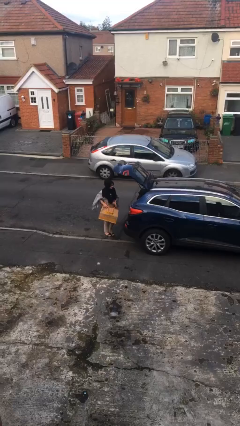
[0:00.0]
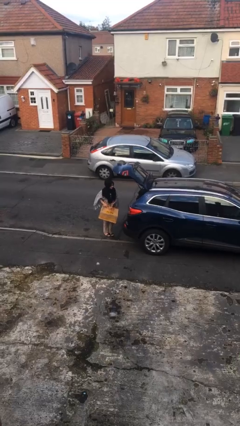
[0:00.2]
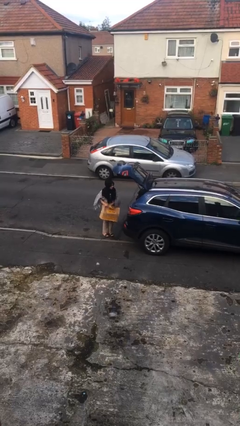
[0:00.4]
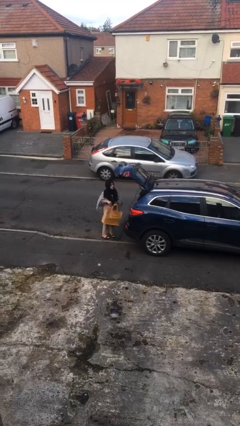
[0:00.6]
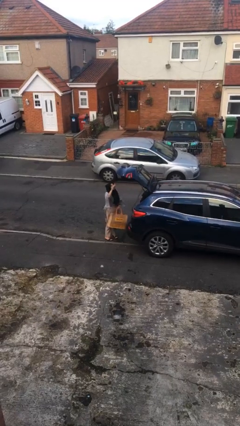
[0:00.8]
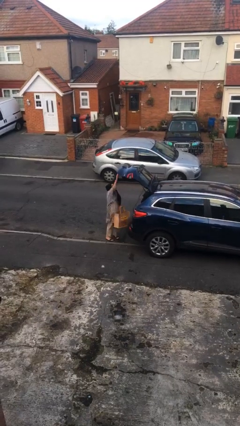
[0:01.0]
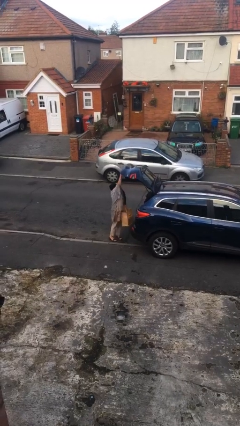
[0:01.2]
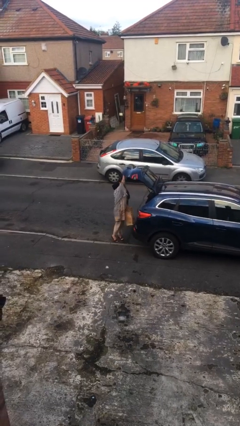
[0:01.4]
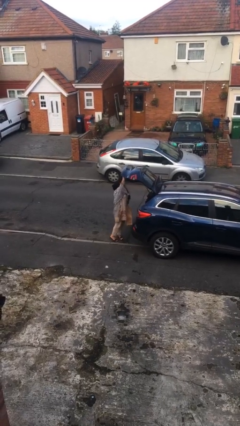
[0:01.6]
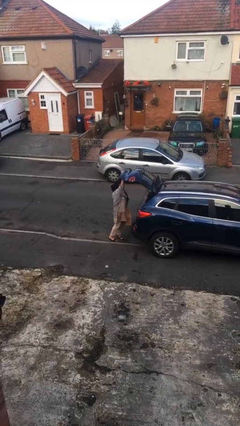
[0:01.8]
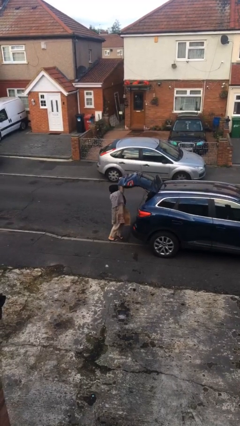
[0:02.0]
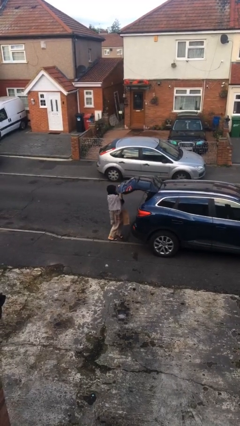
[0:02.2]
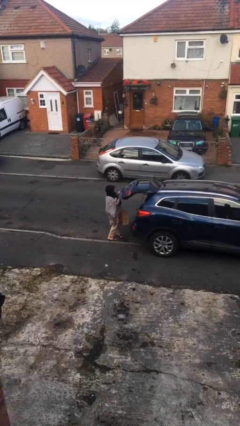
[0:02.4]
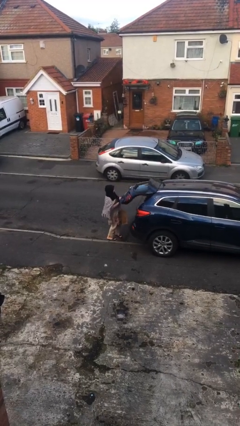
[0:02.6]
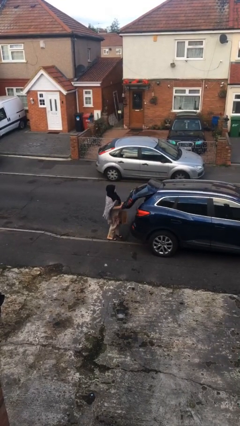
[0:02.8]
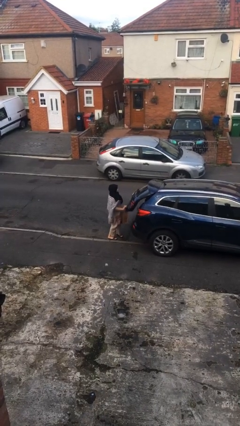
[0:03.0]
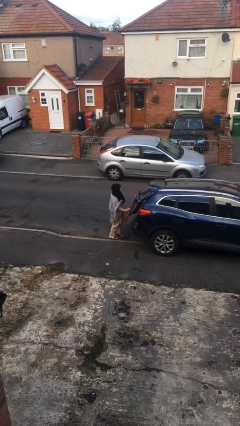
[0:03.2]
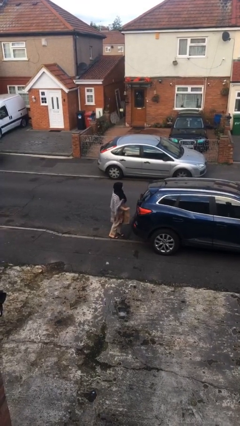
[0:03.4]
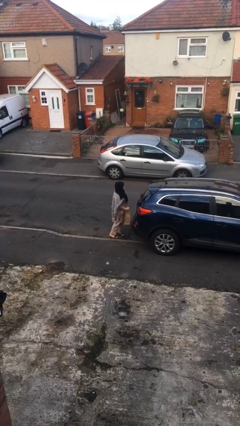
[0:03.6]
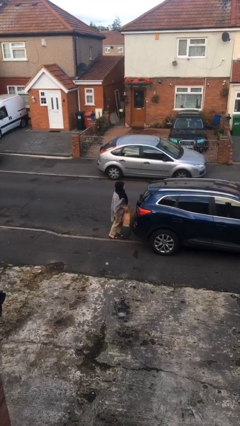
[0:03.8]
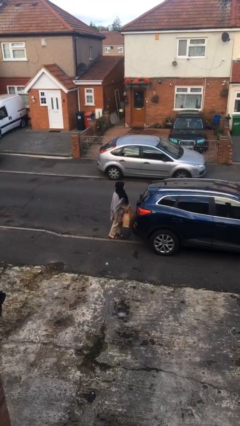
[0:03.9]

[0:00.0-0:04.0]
person closes car trunk

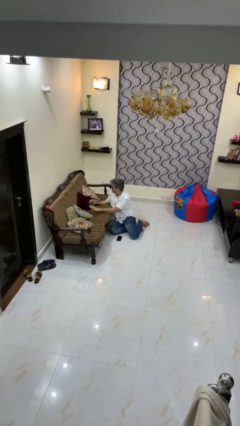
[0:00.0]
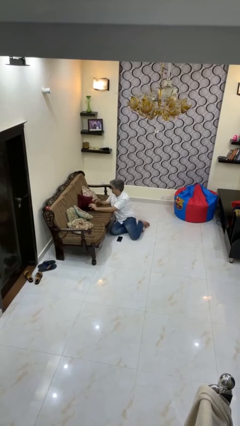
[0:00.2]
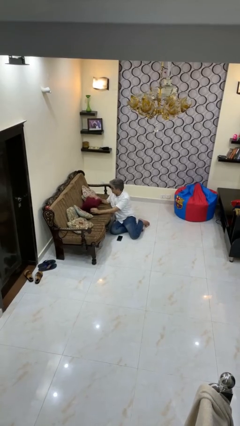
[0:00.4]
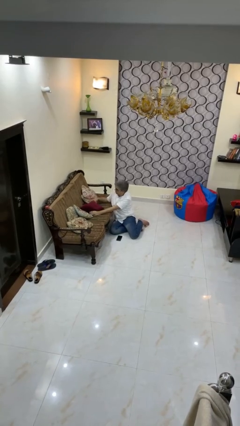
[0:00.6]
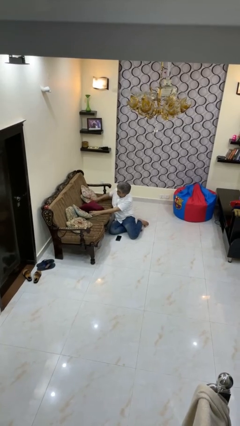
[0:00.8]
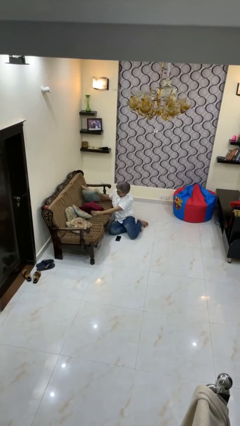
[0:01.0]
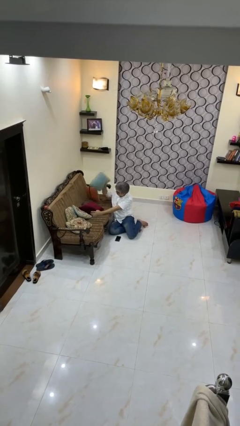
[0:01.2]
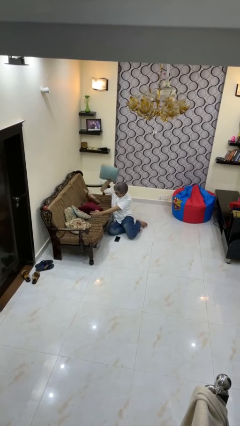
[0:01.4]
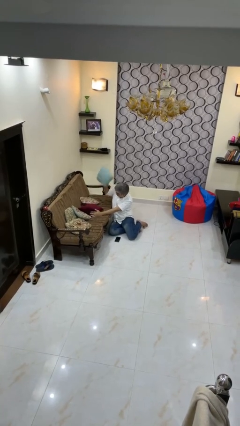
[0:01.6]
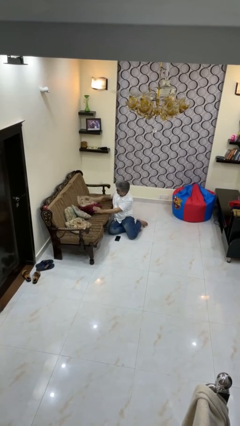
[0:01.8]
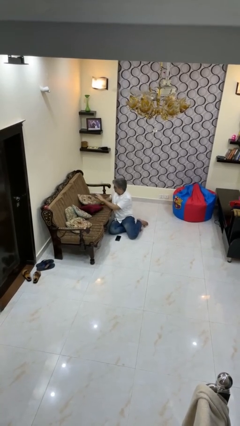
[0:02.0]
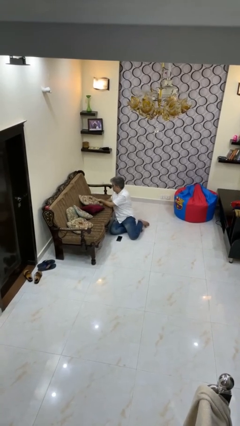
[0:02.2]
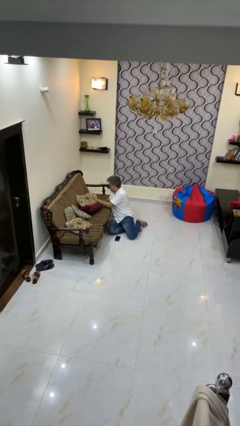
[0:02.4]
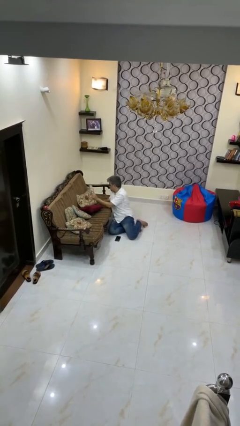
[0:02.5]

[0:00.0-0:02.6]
person searches in couch

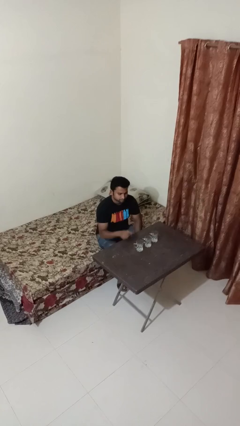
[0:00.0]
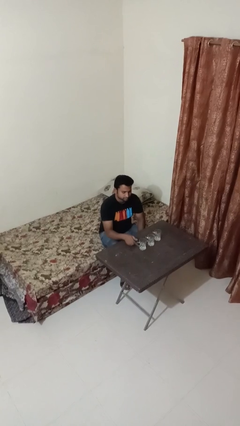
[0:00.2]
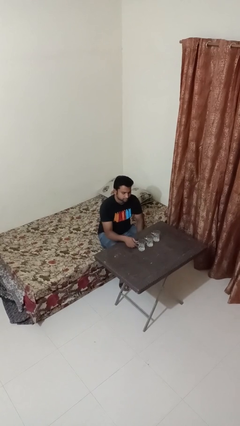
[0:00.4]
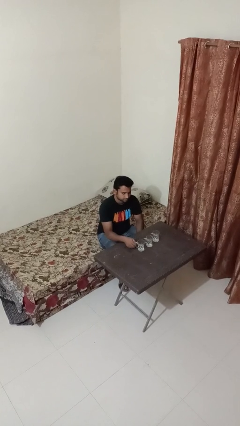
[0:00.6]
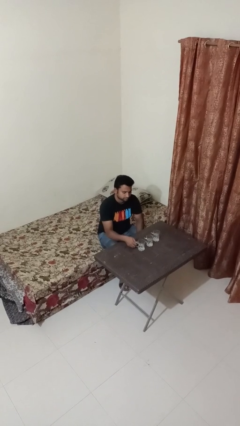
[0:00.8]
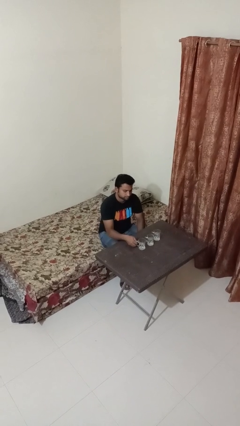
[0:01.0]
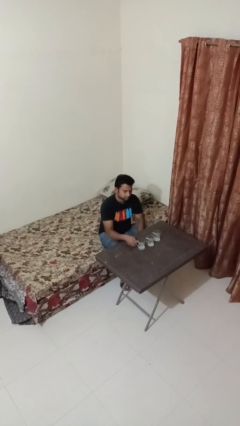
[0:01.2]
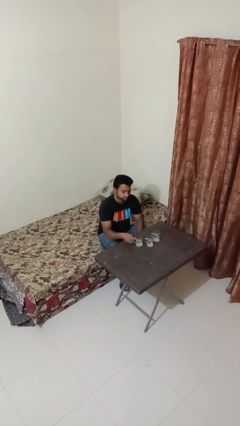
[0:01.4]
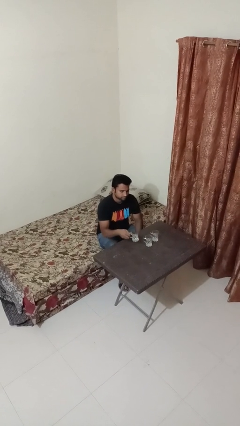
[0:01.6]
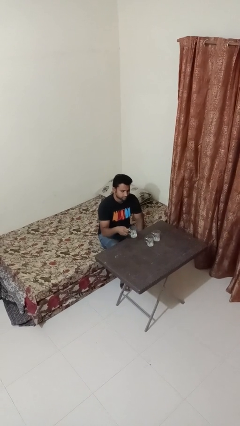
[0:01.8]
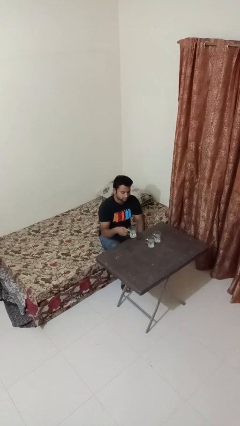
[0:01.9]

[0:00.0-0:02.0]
person picks up object from table

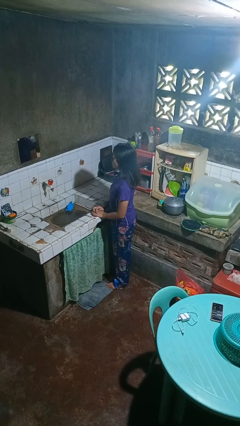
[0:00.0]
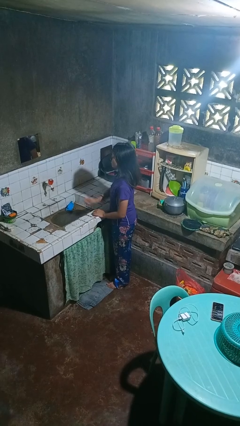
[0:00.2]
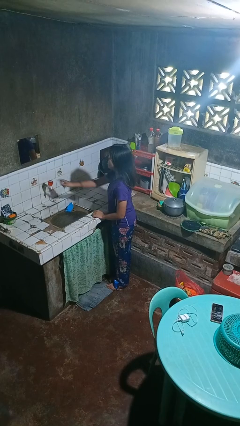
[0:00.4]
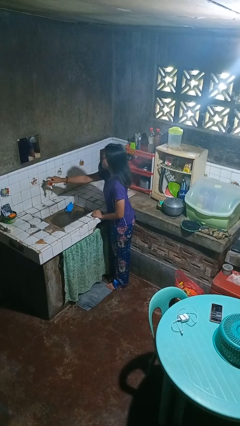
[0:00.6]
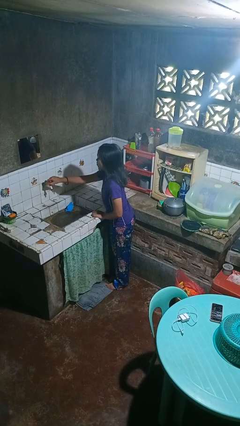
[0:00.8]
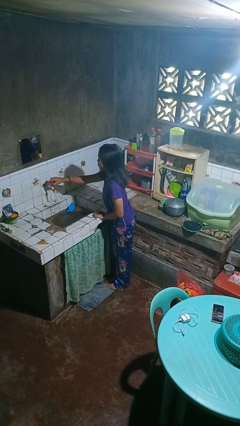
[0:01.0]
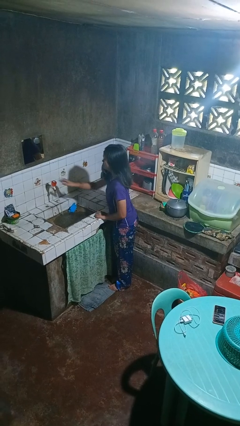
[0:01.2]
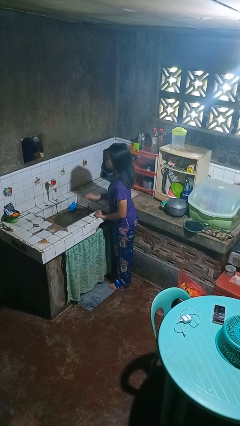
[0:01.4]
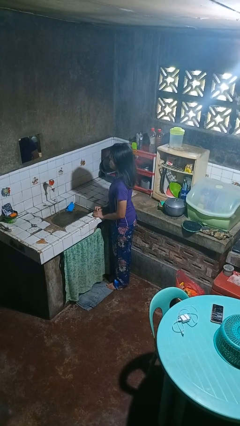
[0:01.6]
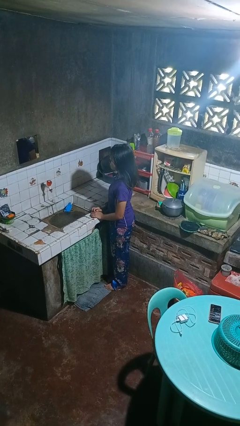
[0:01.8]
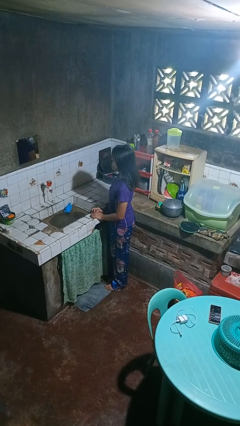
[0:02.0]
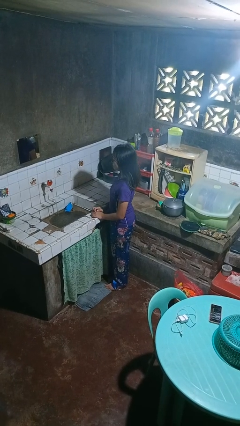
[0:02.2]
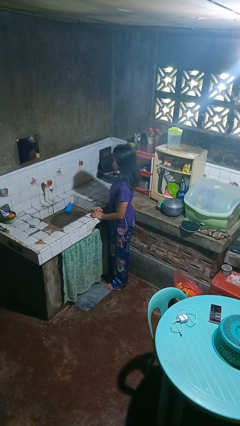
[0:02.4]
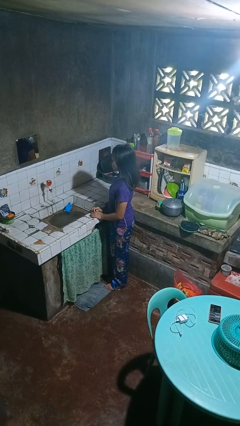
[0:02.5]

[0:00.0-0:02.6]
person turns on faucet

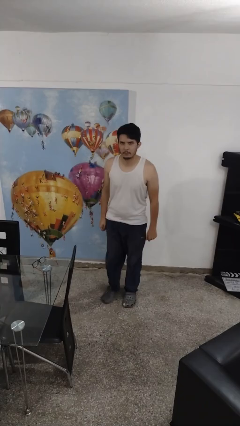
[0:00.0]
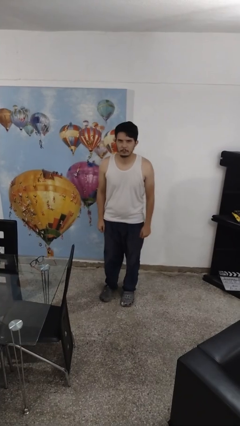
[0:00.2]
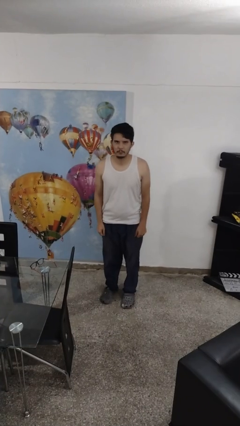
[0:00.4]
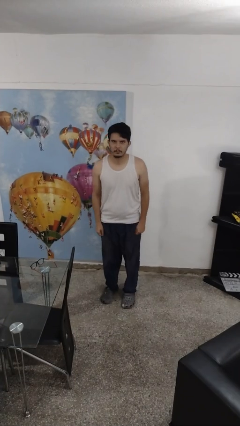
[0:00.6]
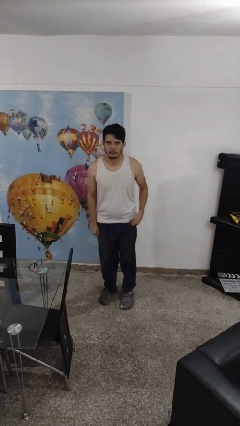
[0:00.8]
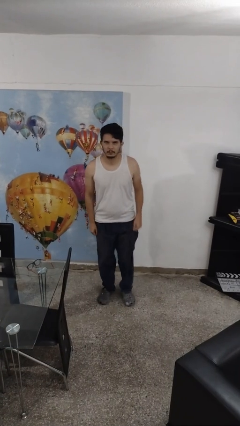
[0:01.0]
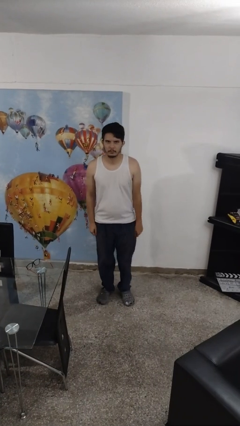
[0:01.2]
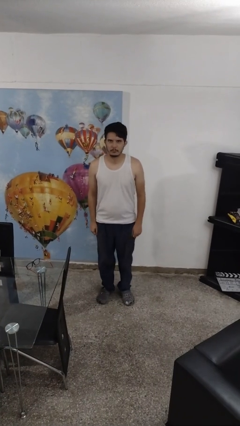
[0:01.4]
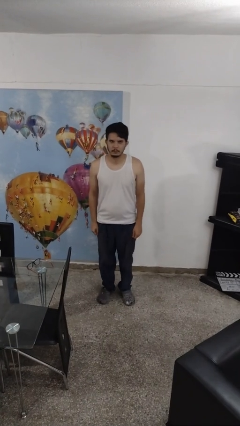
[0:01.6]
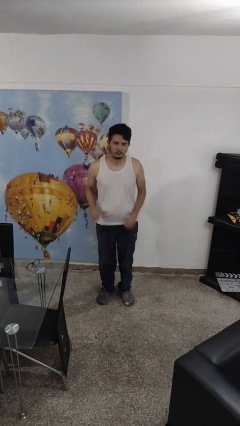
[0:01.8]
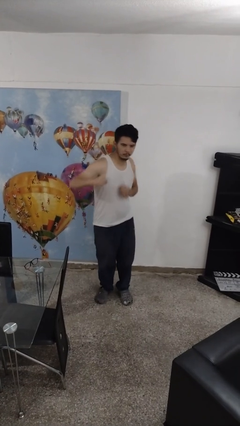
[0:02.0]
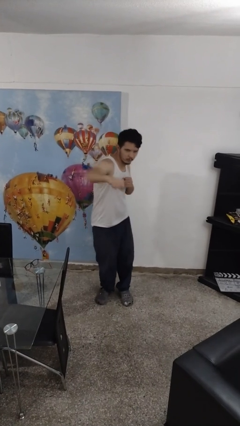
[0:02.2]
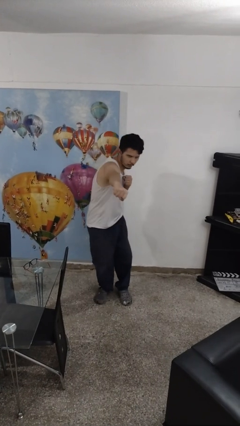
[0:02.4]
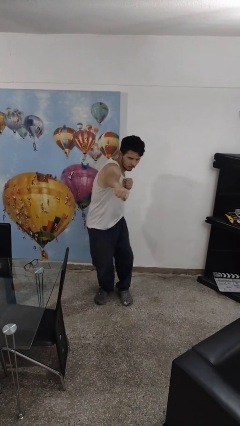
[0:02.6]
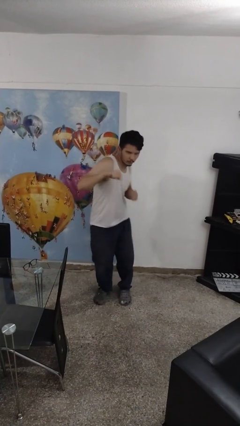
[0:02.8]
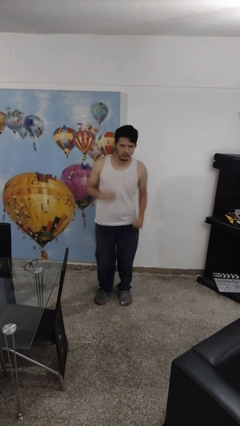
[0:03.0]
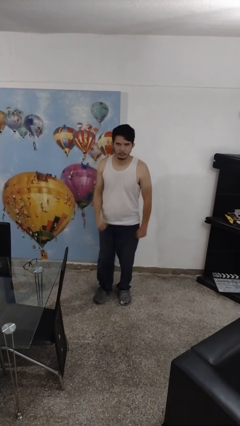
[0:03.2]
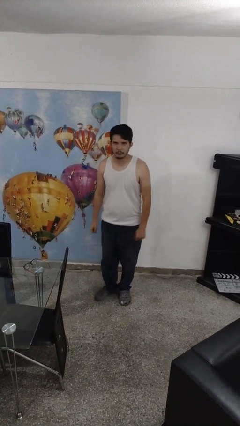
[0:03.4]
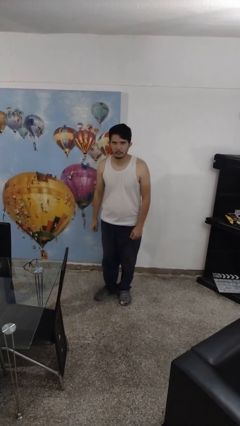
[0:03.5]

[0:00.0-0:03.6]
person karate chop

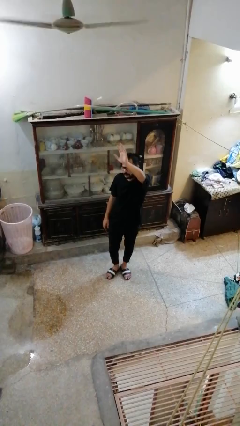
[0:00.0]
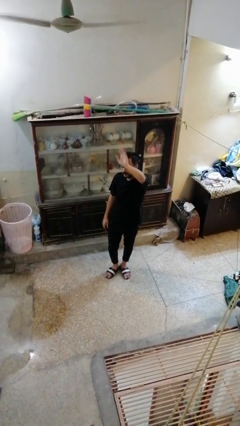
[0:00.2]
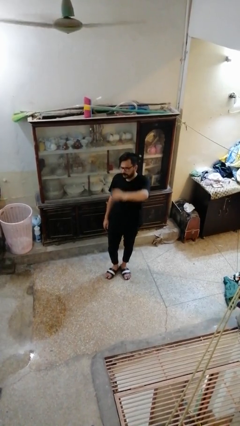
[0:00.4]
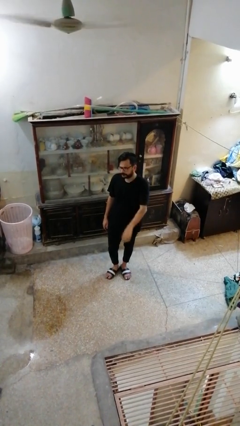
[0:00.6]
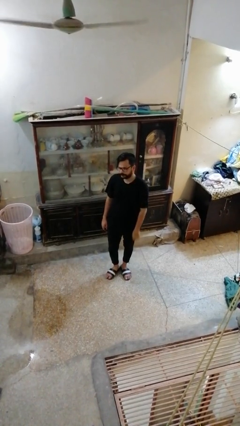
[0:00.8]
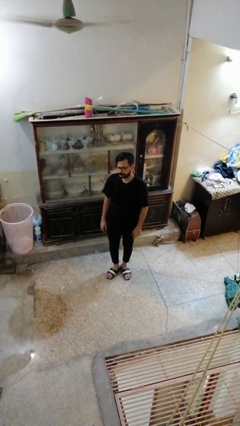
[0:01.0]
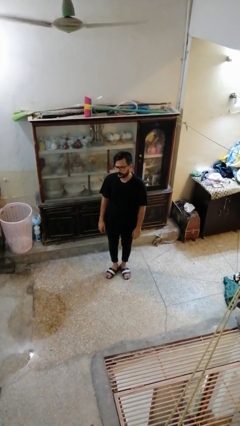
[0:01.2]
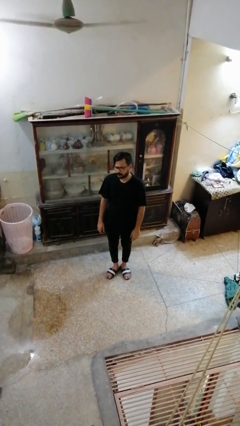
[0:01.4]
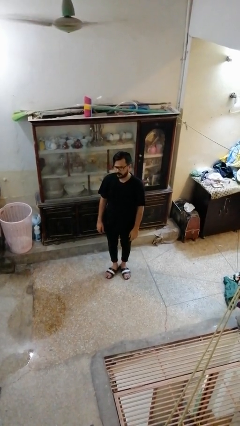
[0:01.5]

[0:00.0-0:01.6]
person gestures lower hand

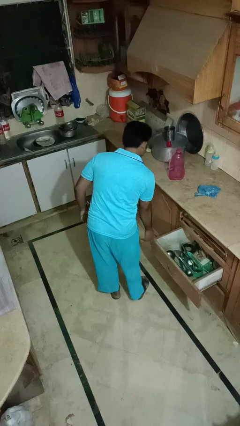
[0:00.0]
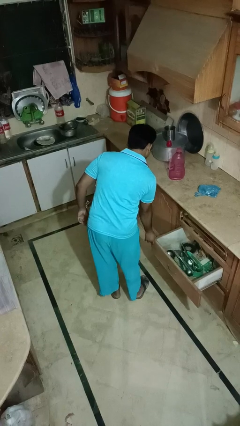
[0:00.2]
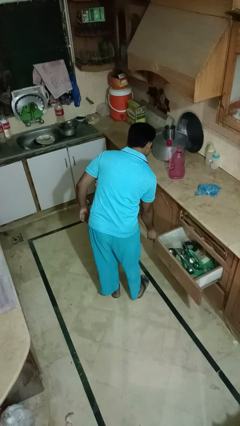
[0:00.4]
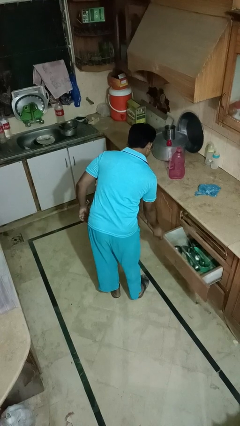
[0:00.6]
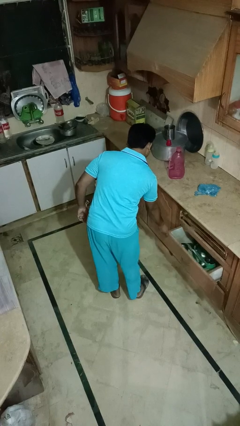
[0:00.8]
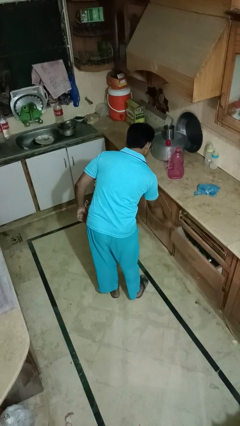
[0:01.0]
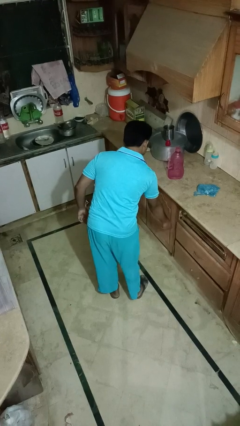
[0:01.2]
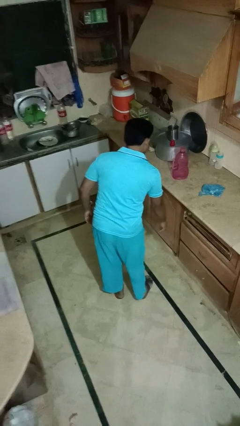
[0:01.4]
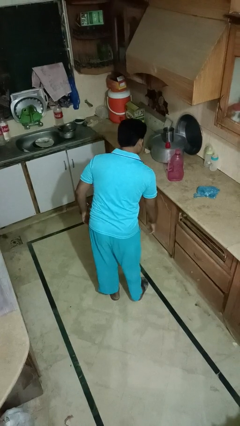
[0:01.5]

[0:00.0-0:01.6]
person closes kitchen drawer
